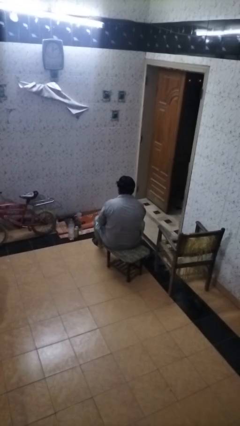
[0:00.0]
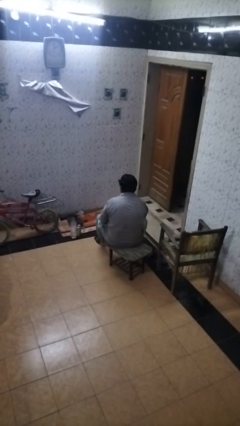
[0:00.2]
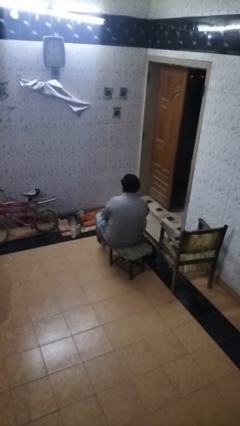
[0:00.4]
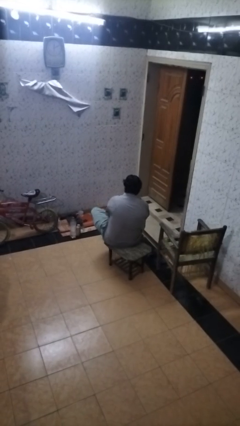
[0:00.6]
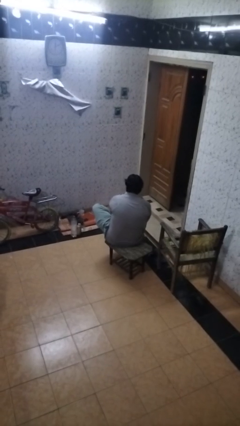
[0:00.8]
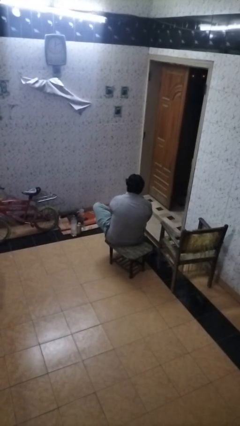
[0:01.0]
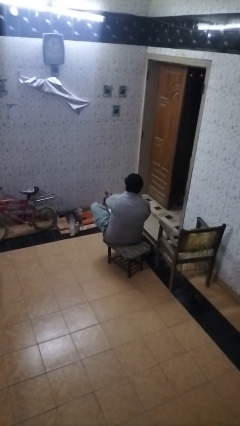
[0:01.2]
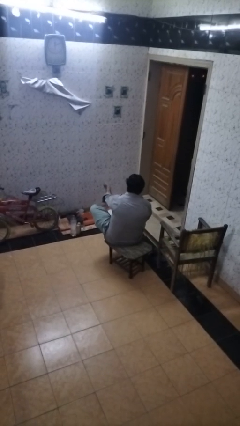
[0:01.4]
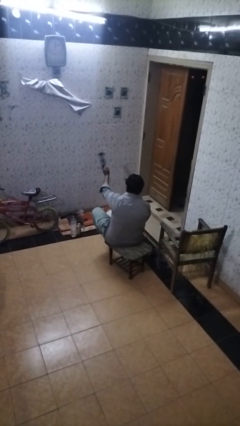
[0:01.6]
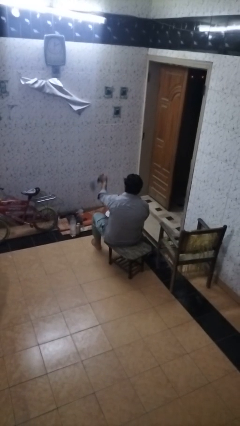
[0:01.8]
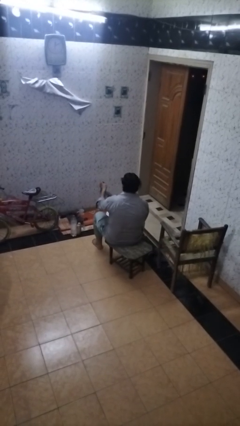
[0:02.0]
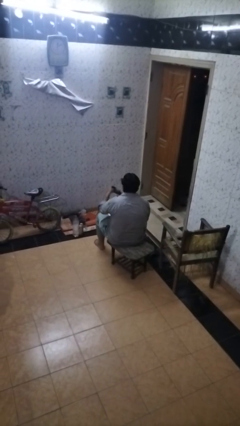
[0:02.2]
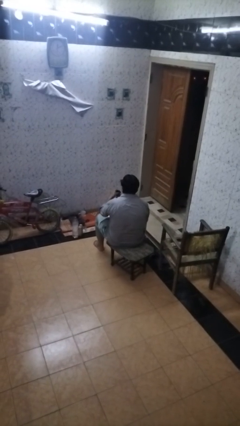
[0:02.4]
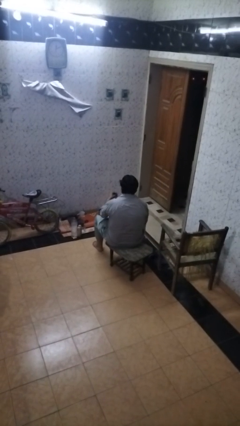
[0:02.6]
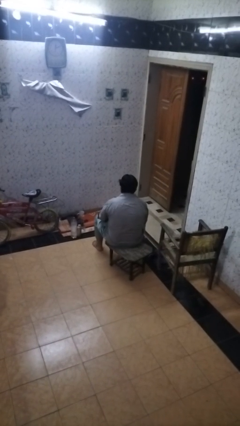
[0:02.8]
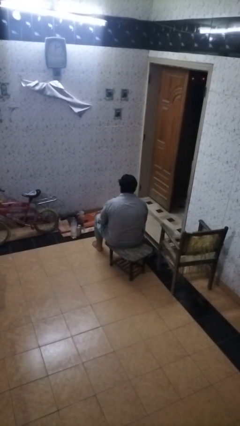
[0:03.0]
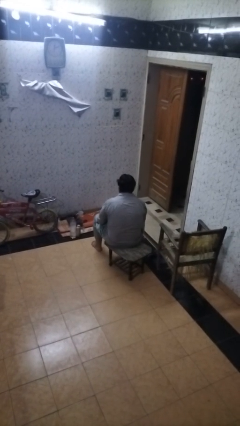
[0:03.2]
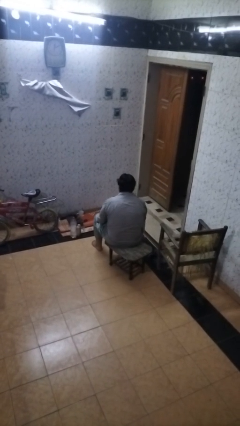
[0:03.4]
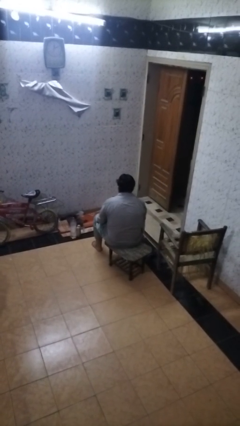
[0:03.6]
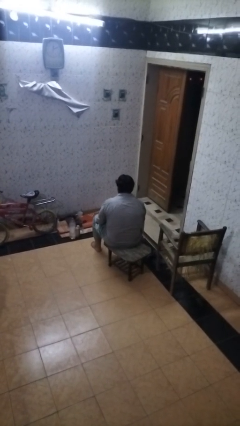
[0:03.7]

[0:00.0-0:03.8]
person takes off socks

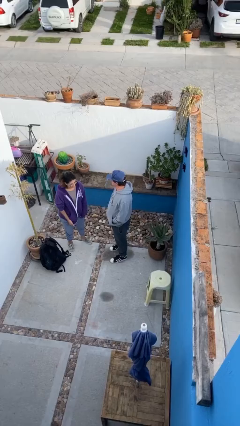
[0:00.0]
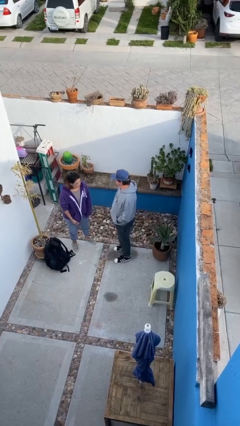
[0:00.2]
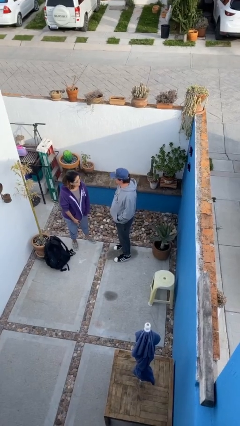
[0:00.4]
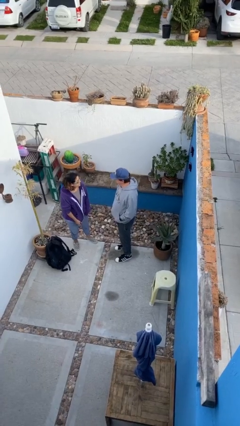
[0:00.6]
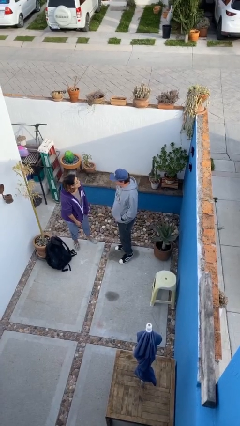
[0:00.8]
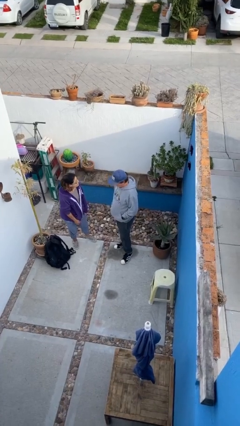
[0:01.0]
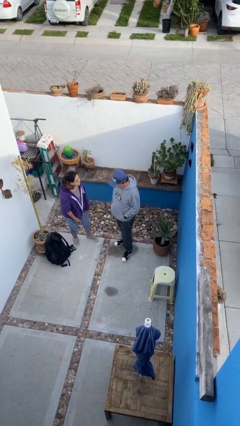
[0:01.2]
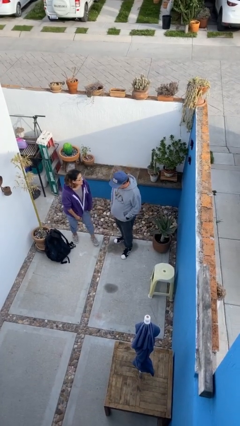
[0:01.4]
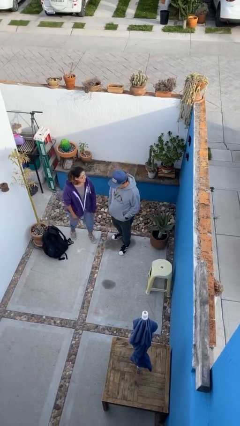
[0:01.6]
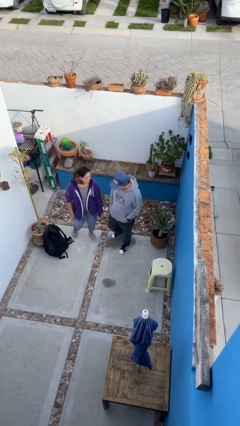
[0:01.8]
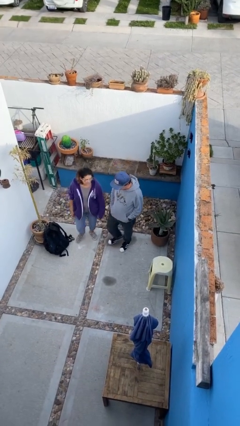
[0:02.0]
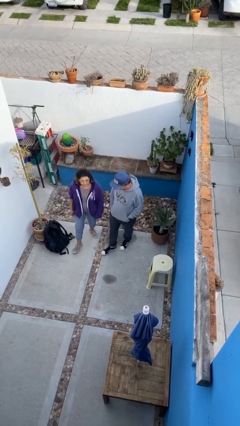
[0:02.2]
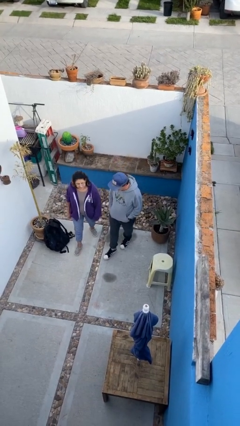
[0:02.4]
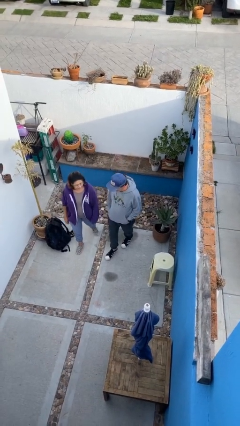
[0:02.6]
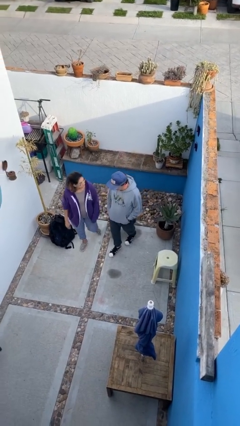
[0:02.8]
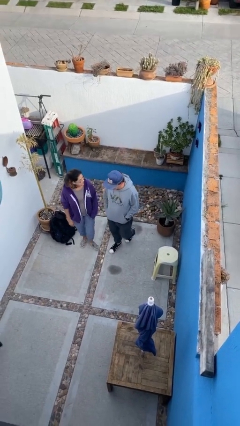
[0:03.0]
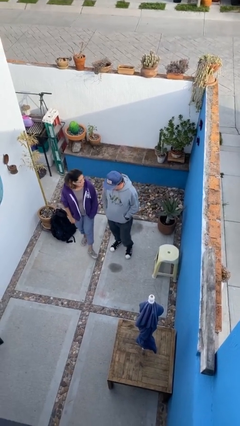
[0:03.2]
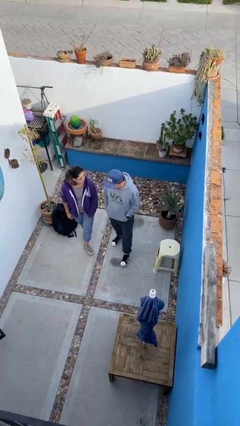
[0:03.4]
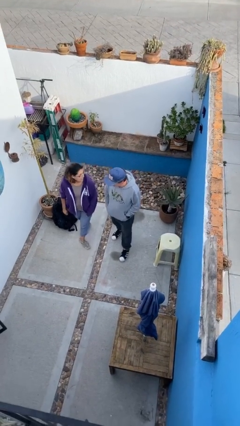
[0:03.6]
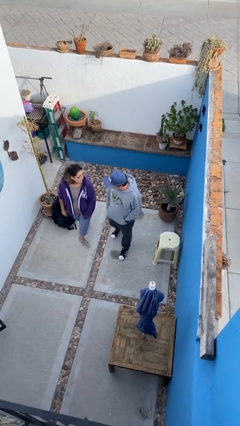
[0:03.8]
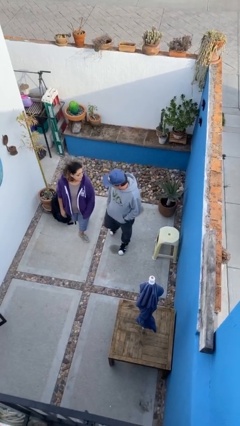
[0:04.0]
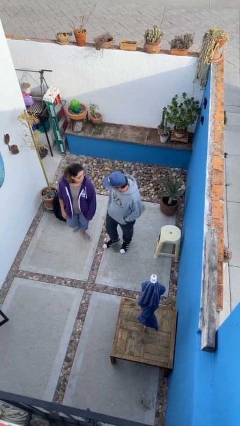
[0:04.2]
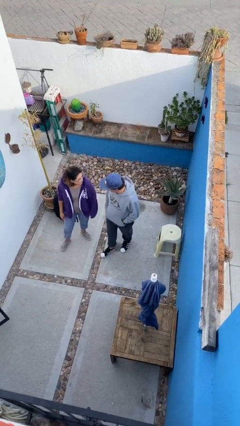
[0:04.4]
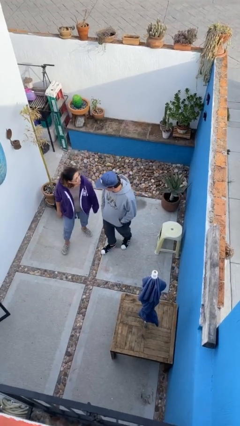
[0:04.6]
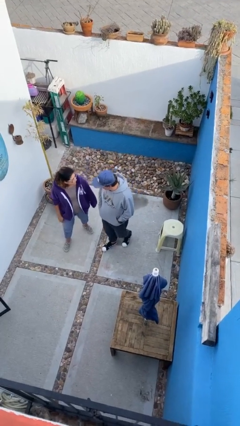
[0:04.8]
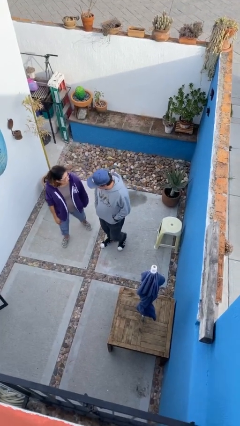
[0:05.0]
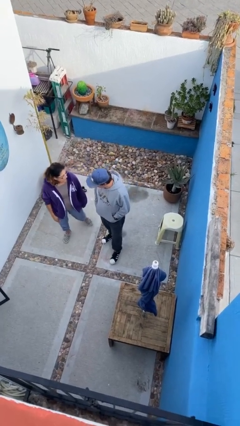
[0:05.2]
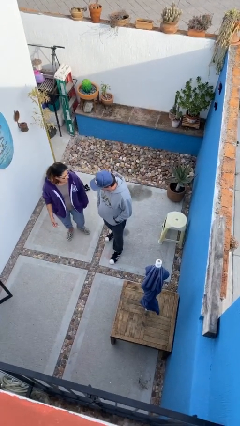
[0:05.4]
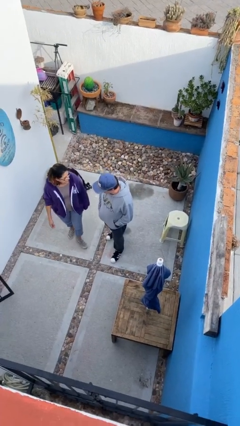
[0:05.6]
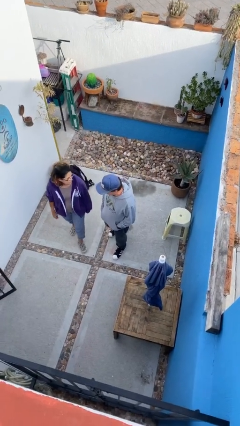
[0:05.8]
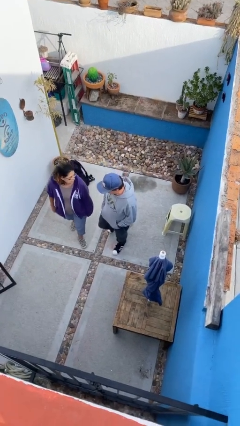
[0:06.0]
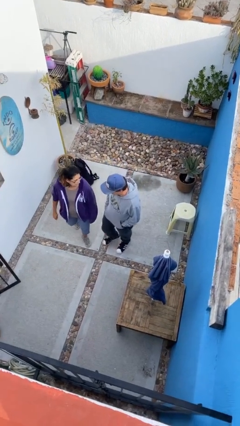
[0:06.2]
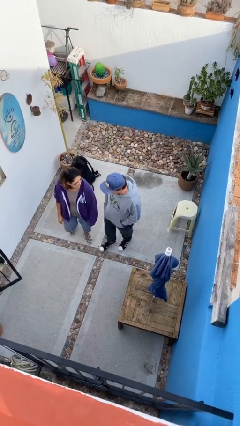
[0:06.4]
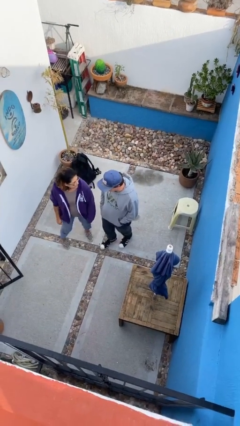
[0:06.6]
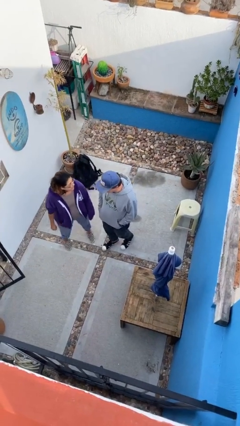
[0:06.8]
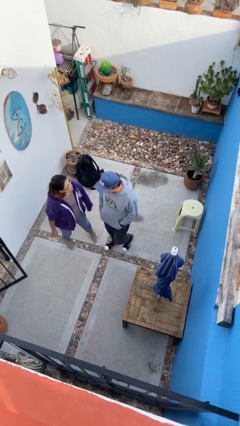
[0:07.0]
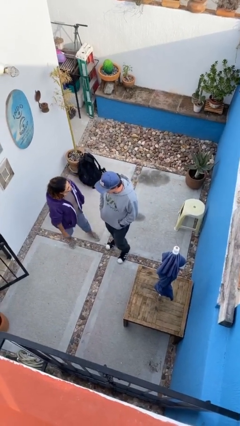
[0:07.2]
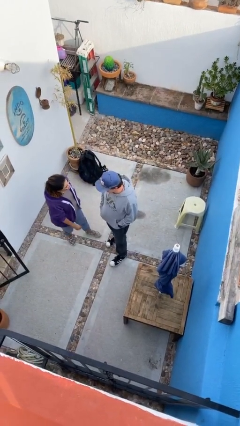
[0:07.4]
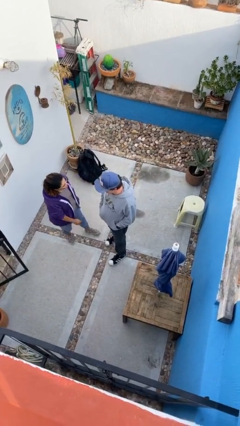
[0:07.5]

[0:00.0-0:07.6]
person talks to person

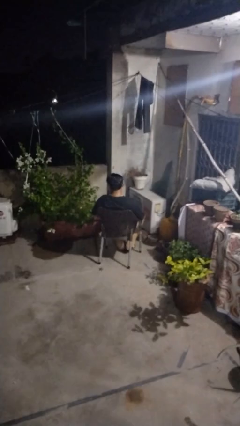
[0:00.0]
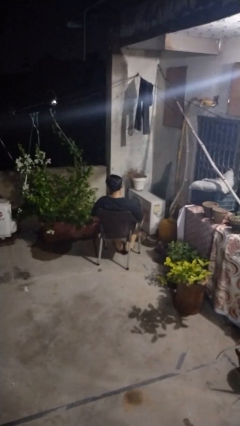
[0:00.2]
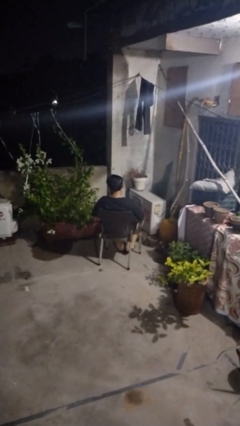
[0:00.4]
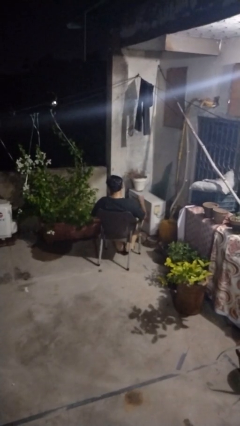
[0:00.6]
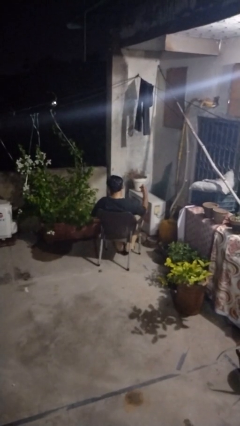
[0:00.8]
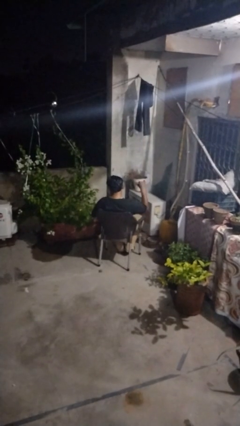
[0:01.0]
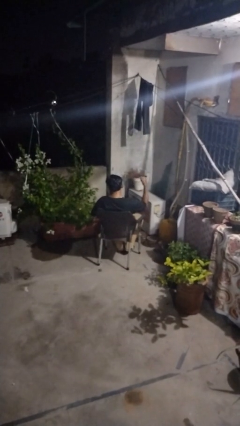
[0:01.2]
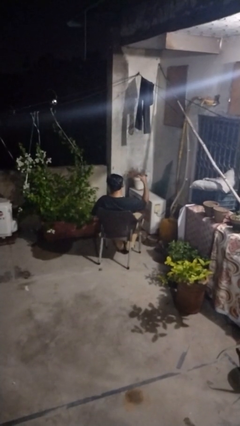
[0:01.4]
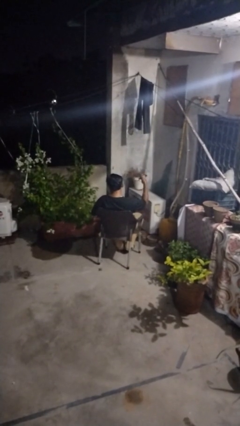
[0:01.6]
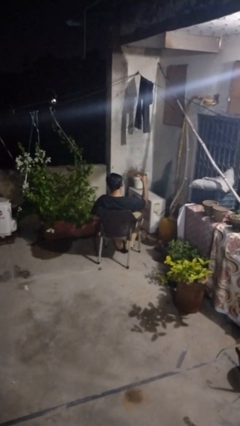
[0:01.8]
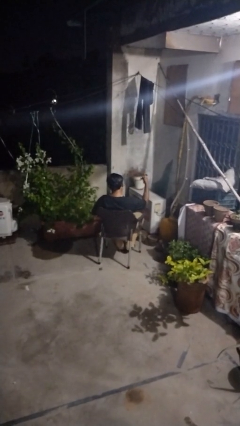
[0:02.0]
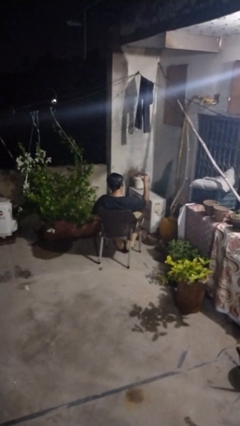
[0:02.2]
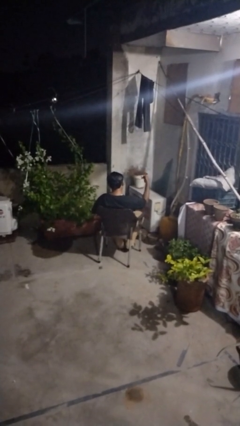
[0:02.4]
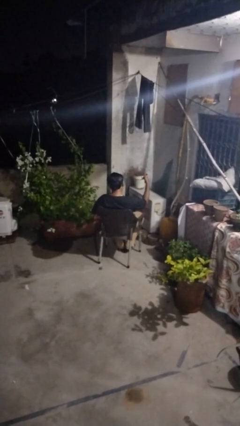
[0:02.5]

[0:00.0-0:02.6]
person gestures hang loose

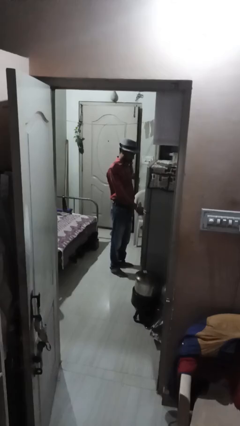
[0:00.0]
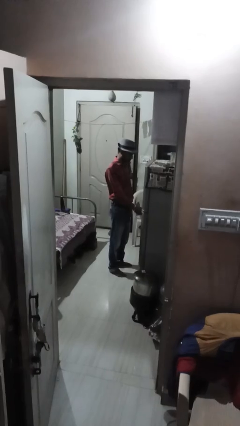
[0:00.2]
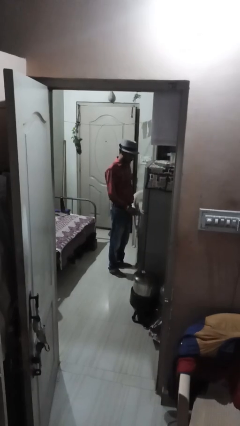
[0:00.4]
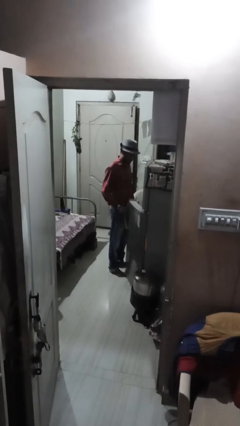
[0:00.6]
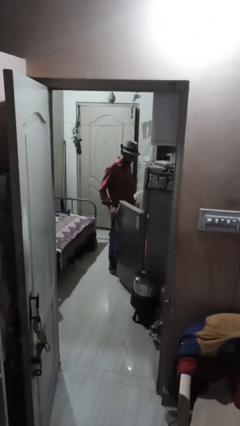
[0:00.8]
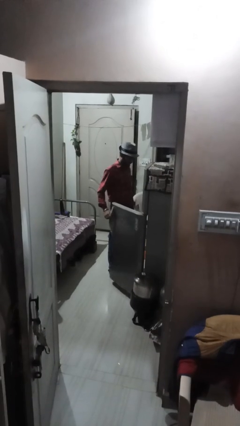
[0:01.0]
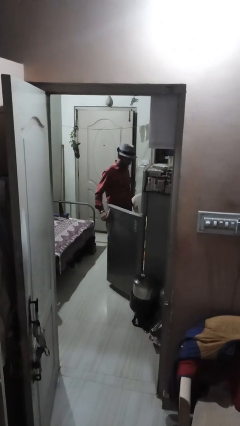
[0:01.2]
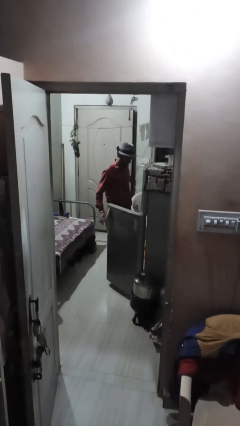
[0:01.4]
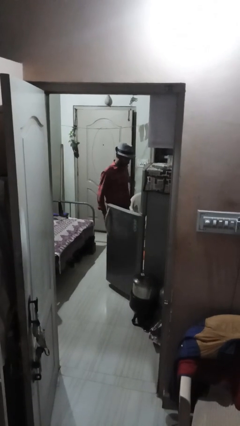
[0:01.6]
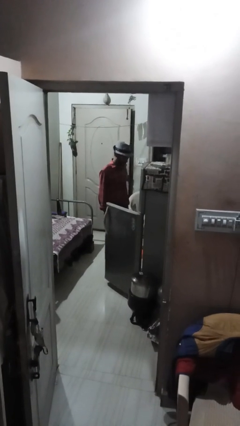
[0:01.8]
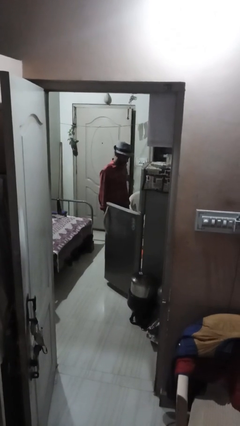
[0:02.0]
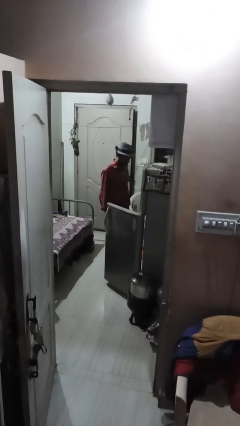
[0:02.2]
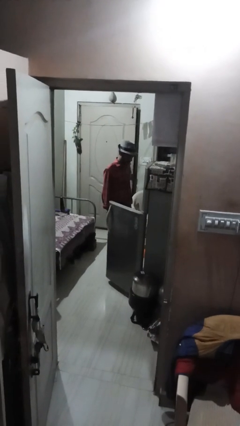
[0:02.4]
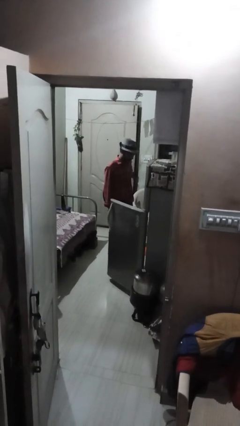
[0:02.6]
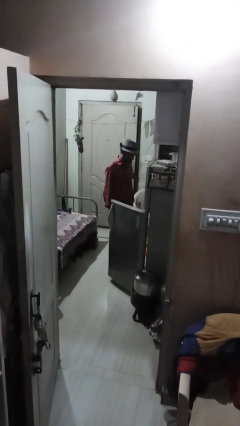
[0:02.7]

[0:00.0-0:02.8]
person opens refrigerator

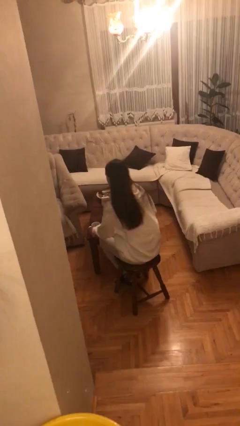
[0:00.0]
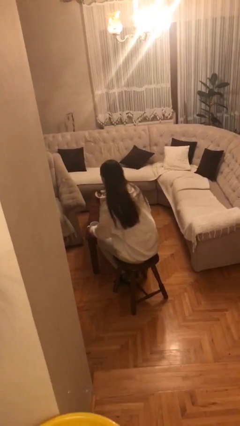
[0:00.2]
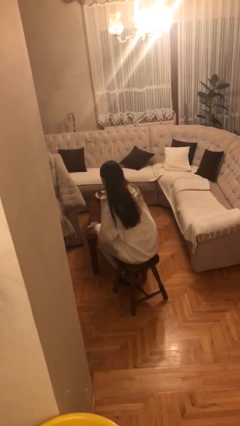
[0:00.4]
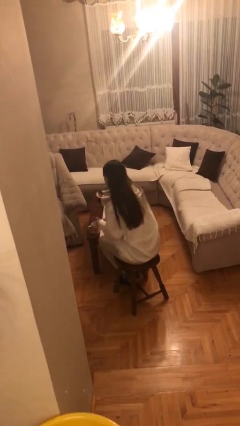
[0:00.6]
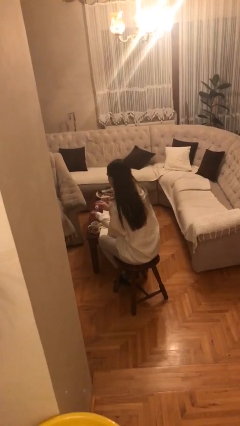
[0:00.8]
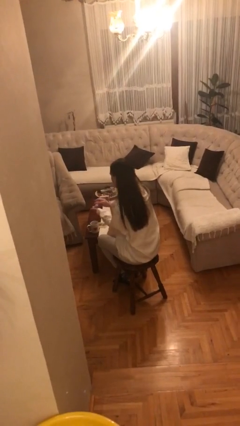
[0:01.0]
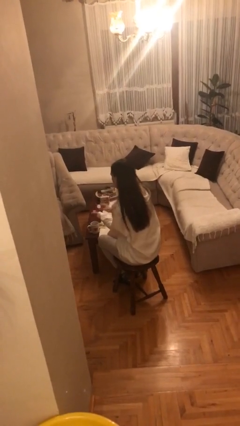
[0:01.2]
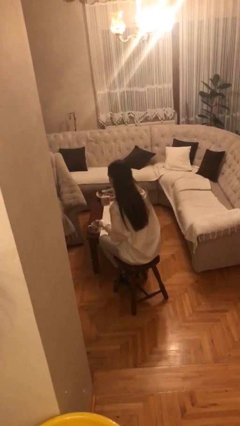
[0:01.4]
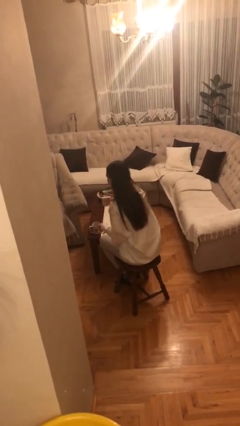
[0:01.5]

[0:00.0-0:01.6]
person takes medicine pills
